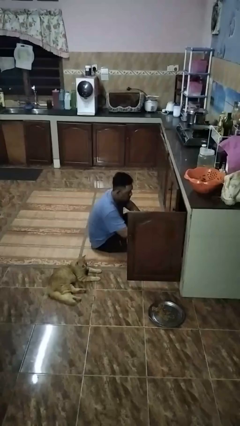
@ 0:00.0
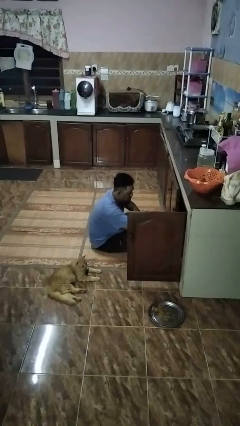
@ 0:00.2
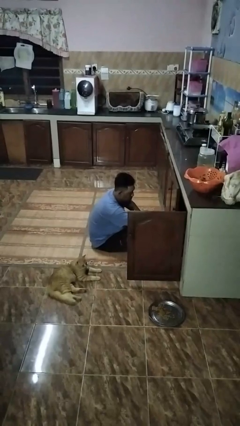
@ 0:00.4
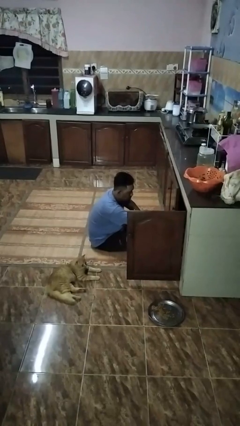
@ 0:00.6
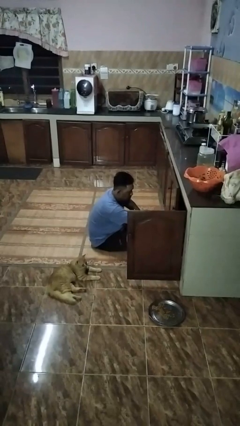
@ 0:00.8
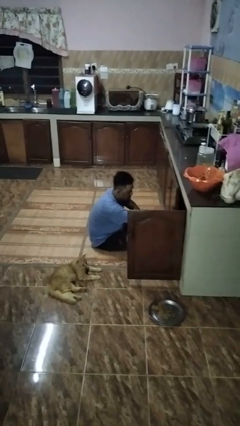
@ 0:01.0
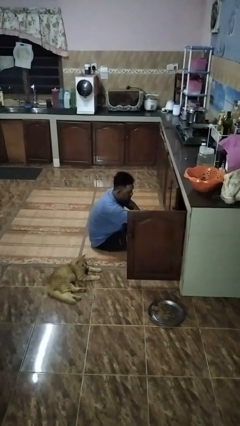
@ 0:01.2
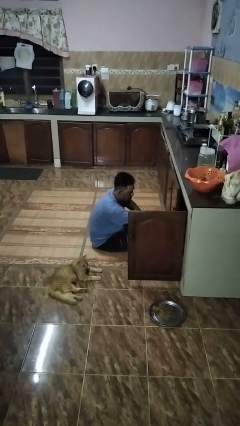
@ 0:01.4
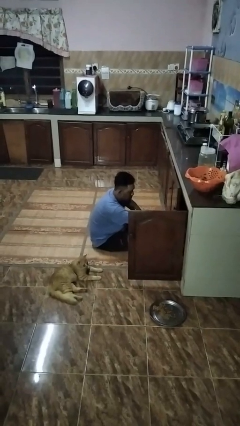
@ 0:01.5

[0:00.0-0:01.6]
person puts object into kitchen drawer

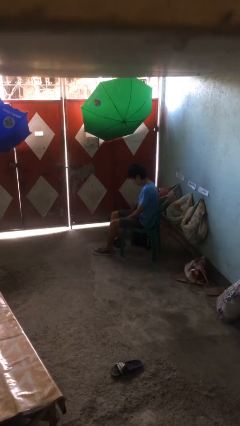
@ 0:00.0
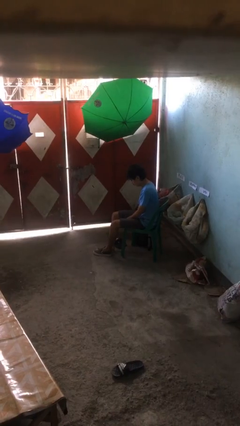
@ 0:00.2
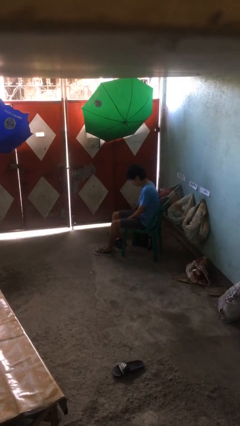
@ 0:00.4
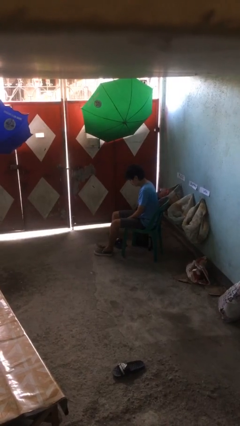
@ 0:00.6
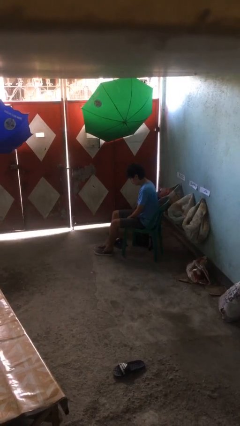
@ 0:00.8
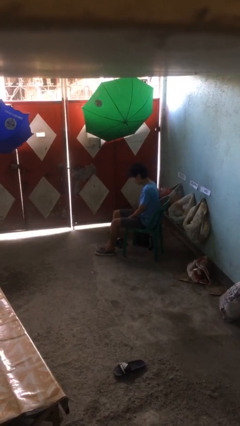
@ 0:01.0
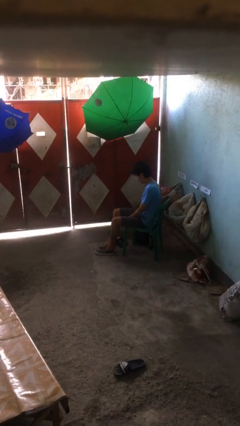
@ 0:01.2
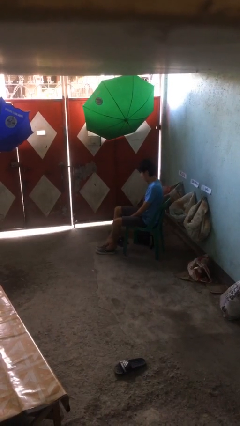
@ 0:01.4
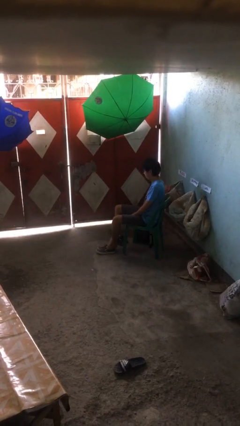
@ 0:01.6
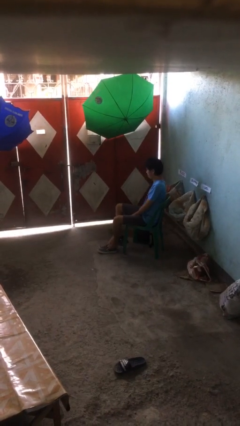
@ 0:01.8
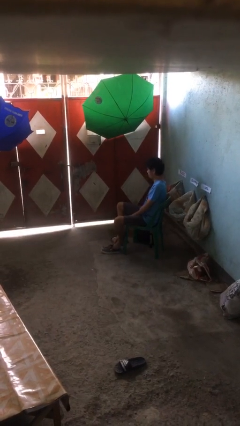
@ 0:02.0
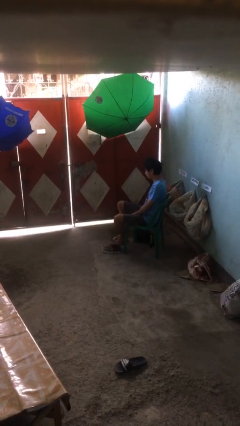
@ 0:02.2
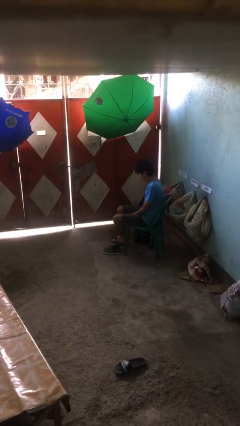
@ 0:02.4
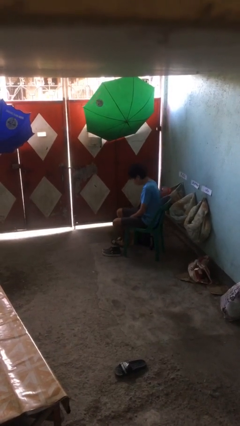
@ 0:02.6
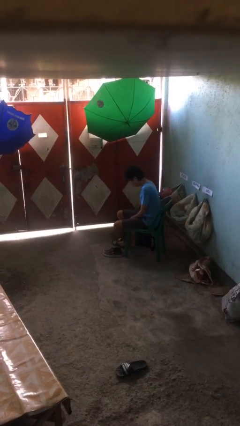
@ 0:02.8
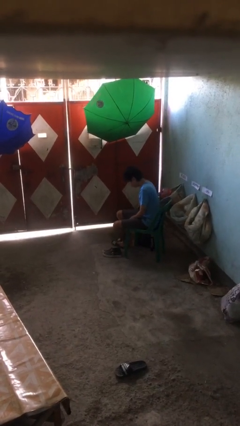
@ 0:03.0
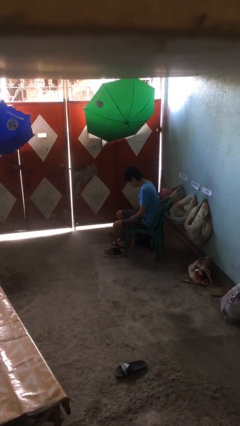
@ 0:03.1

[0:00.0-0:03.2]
person takes off shoes

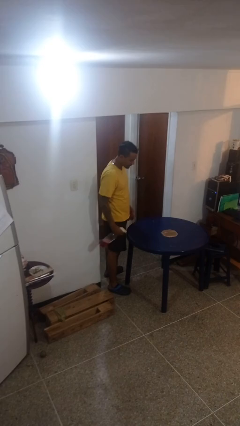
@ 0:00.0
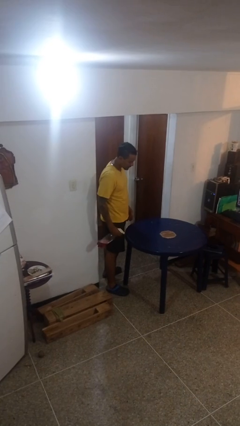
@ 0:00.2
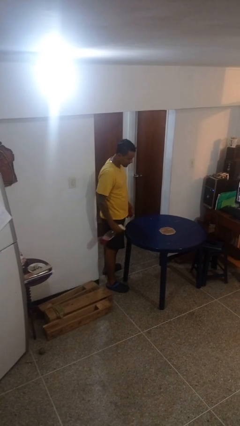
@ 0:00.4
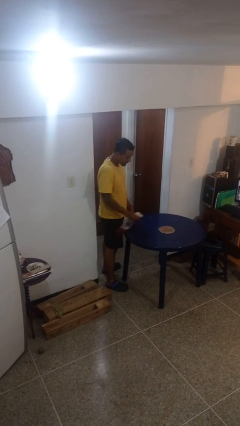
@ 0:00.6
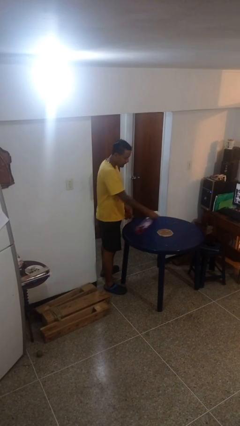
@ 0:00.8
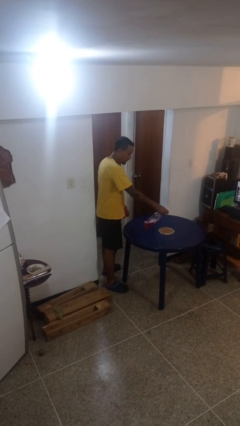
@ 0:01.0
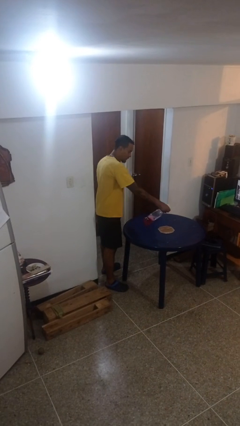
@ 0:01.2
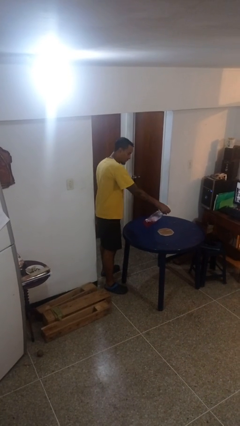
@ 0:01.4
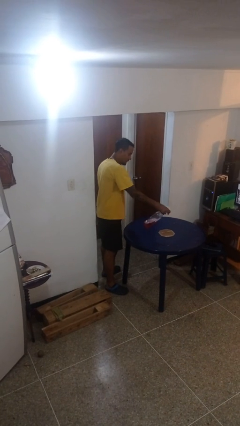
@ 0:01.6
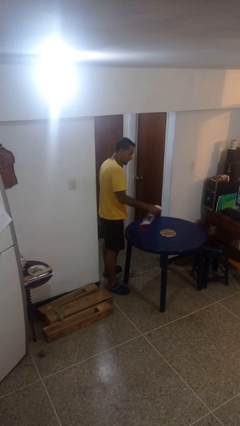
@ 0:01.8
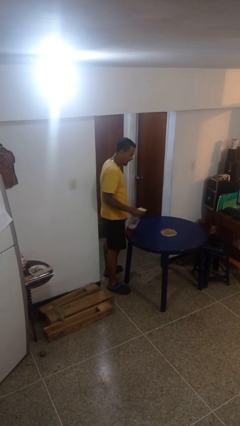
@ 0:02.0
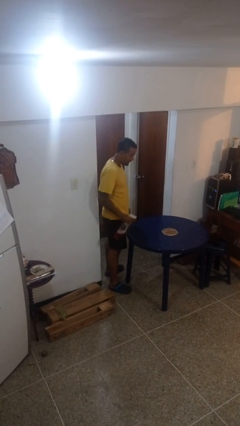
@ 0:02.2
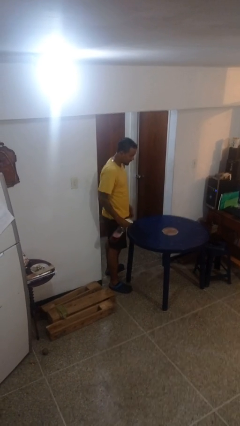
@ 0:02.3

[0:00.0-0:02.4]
person sprays from bottle

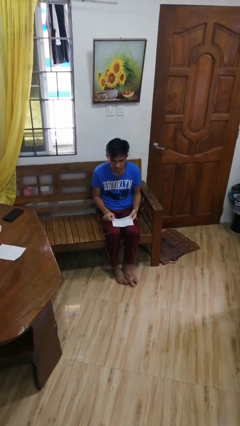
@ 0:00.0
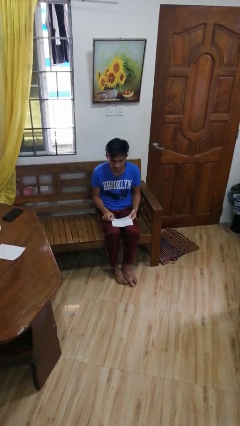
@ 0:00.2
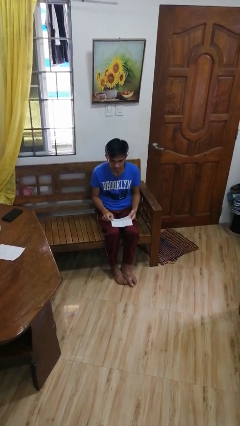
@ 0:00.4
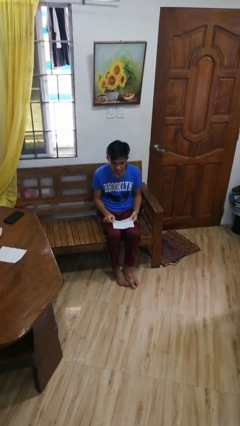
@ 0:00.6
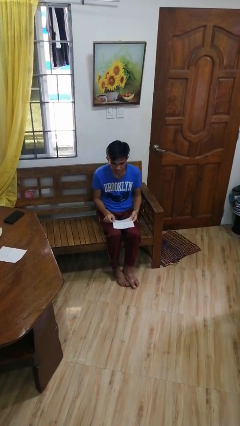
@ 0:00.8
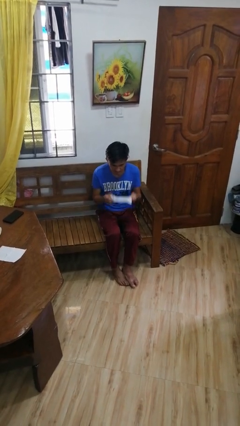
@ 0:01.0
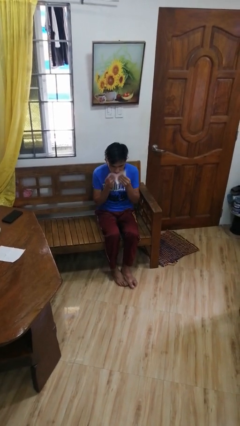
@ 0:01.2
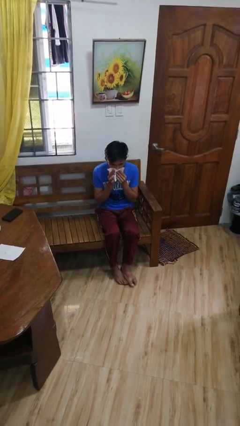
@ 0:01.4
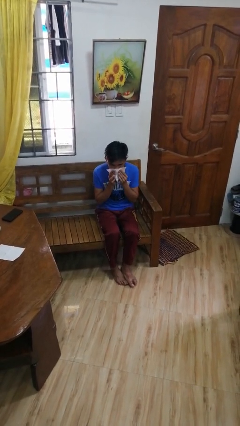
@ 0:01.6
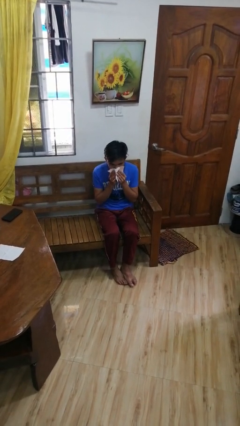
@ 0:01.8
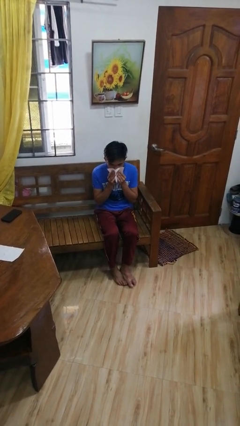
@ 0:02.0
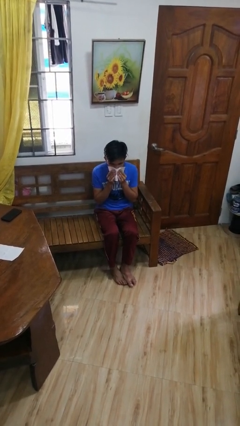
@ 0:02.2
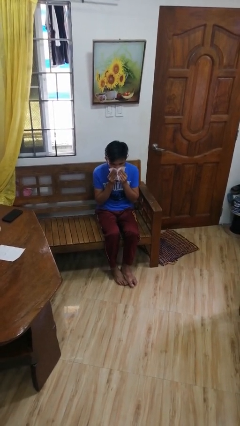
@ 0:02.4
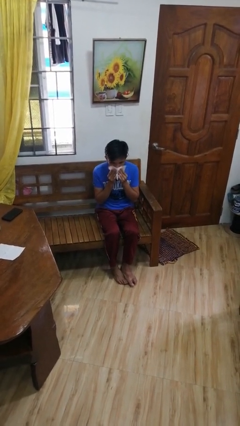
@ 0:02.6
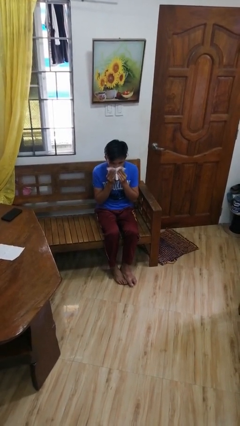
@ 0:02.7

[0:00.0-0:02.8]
person wipes mouth with napkin

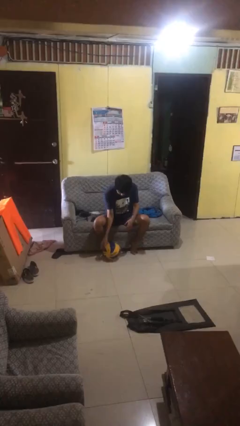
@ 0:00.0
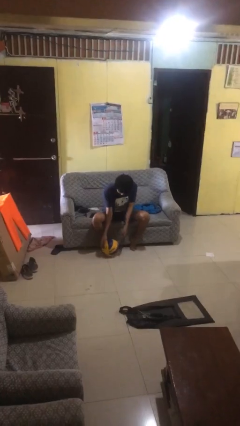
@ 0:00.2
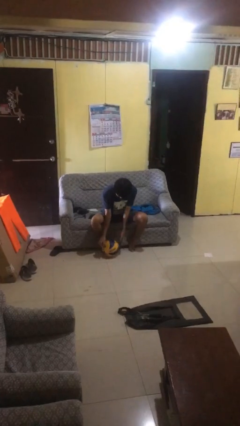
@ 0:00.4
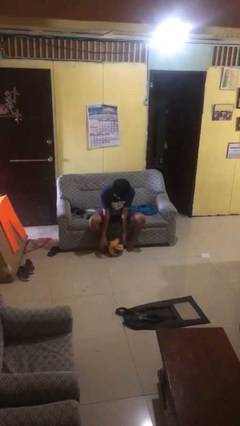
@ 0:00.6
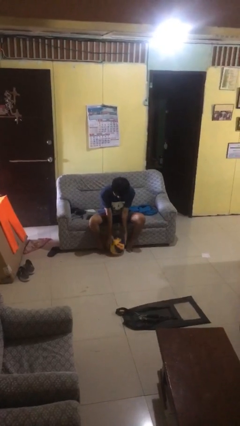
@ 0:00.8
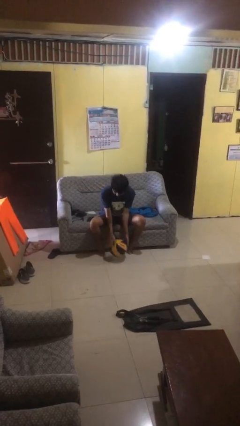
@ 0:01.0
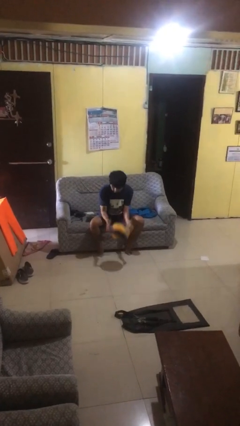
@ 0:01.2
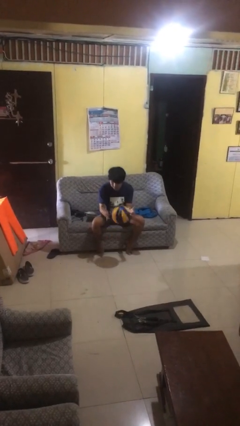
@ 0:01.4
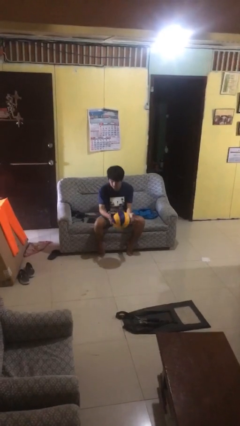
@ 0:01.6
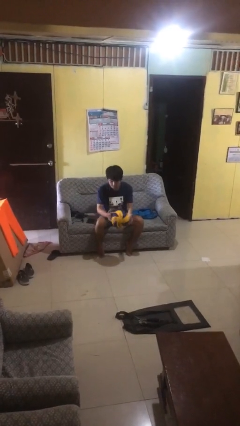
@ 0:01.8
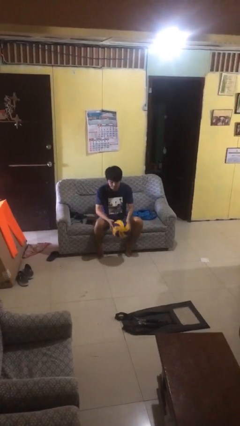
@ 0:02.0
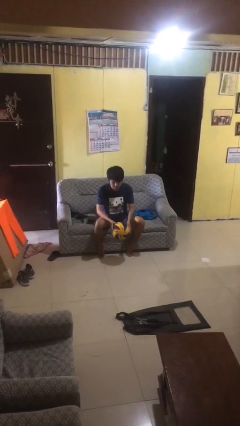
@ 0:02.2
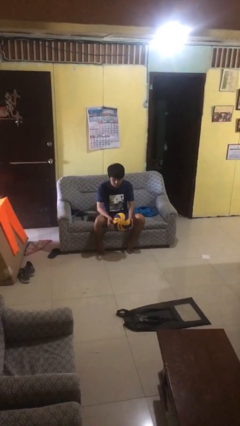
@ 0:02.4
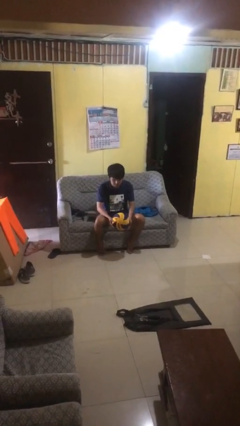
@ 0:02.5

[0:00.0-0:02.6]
person picks up object from floor

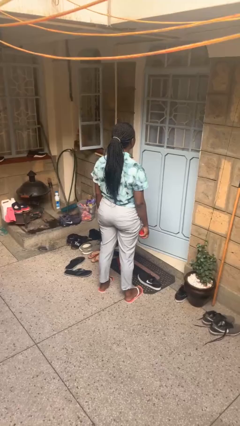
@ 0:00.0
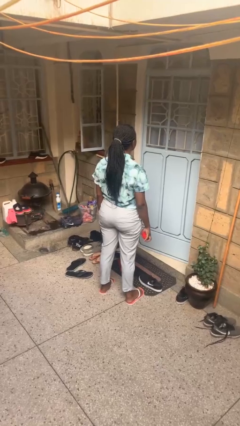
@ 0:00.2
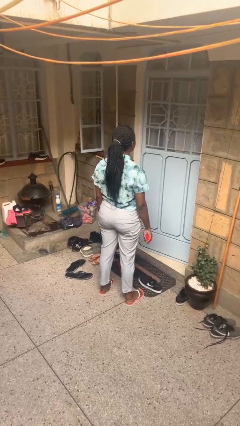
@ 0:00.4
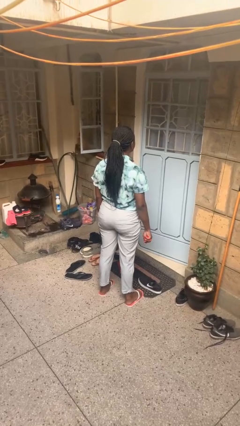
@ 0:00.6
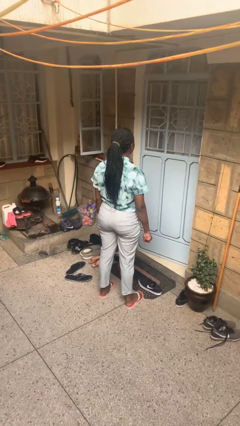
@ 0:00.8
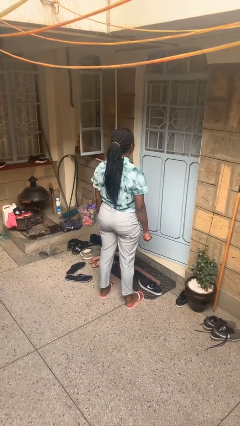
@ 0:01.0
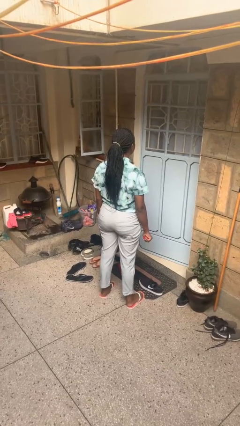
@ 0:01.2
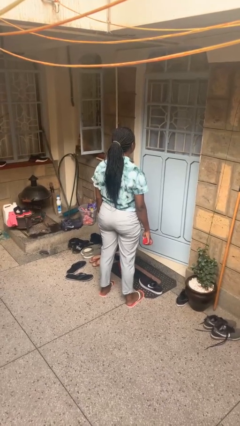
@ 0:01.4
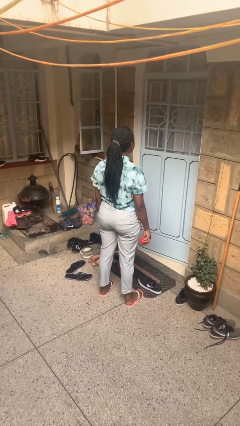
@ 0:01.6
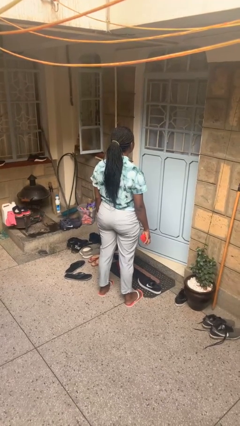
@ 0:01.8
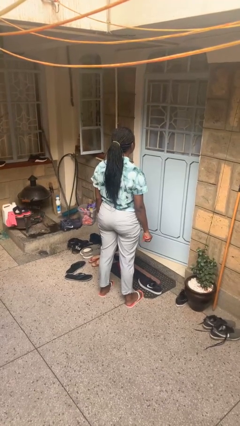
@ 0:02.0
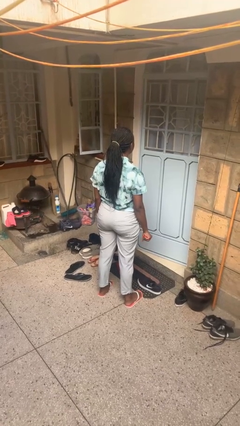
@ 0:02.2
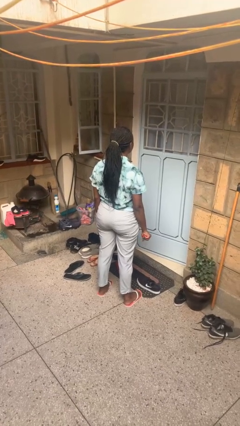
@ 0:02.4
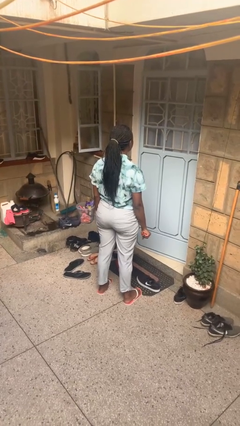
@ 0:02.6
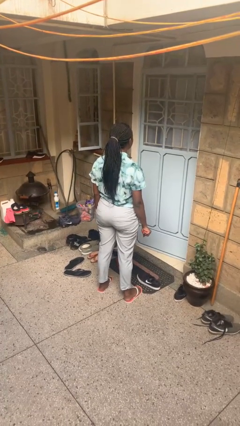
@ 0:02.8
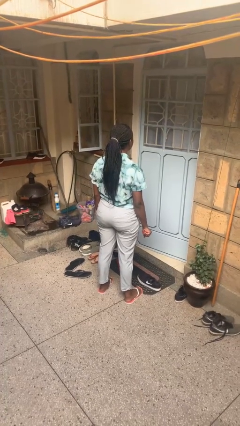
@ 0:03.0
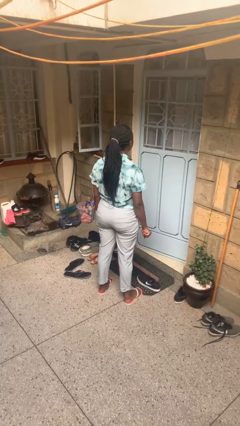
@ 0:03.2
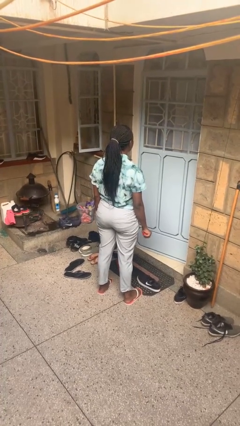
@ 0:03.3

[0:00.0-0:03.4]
person squeezes object

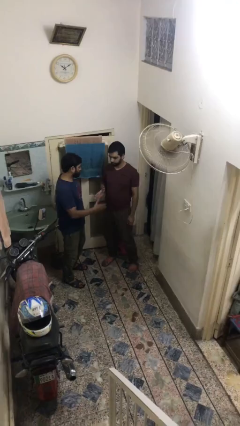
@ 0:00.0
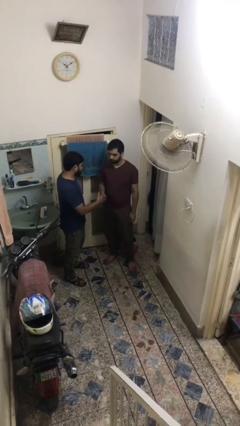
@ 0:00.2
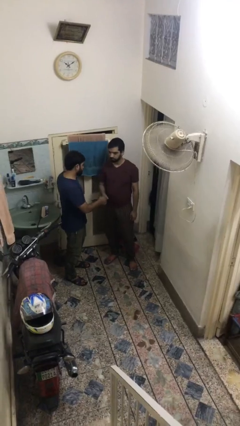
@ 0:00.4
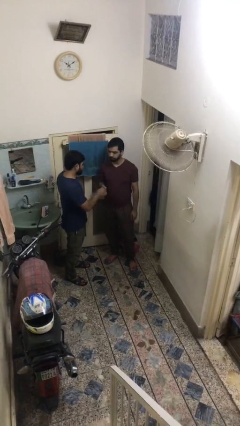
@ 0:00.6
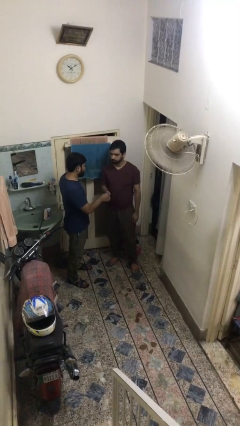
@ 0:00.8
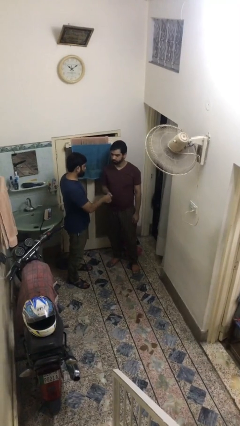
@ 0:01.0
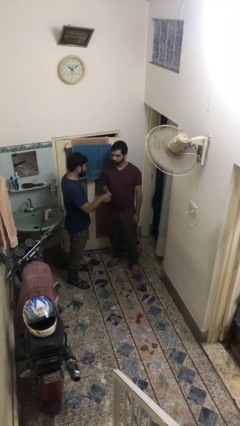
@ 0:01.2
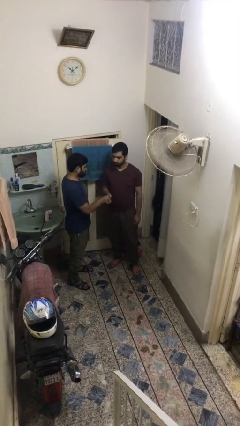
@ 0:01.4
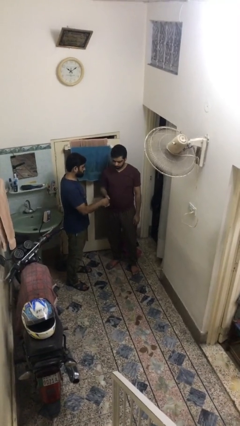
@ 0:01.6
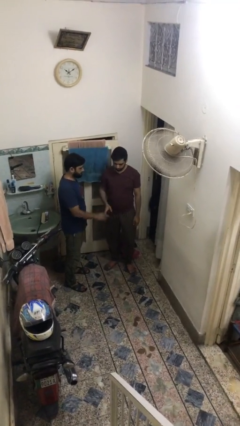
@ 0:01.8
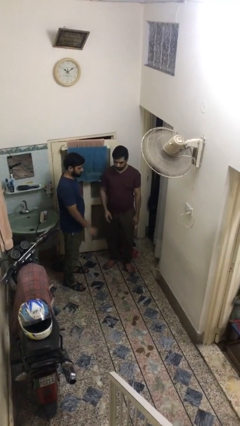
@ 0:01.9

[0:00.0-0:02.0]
person shakes hand
